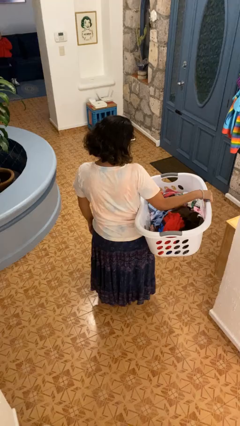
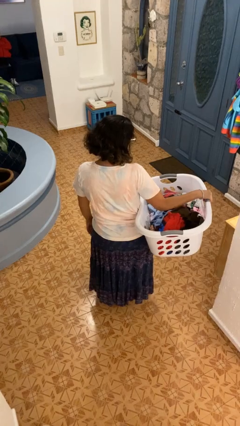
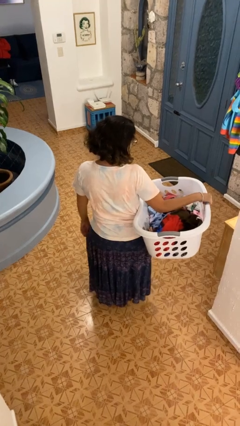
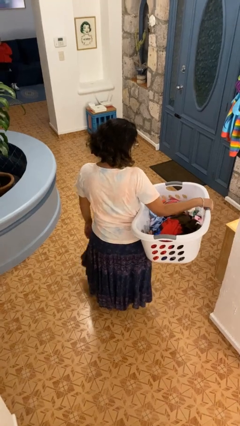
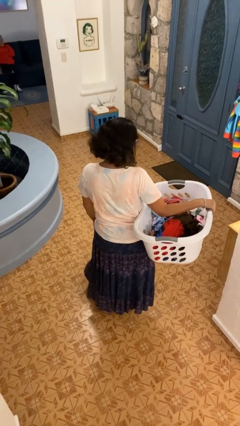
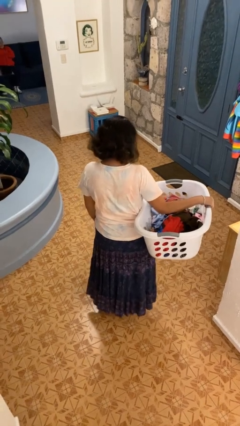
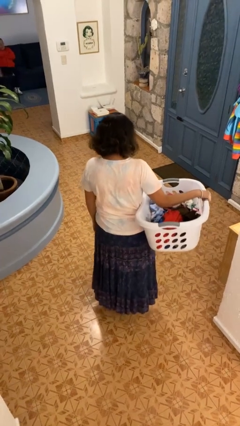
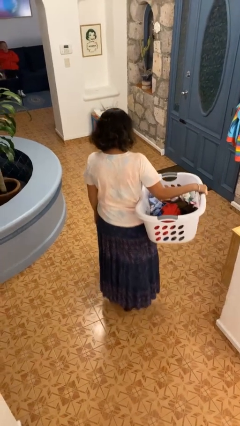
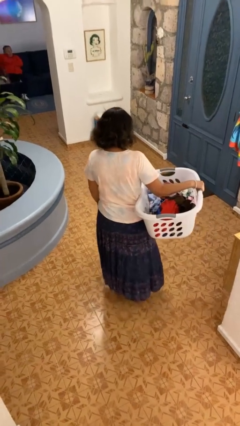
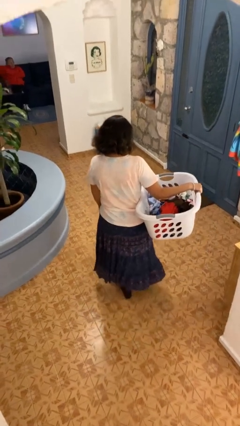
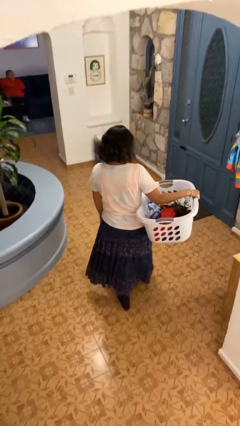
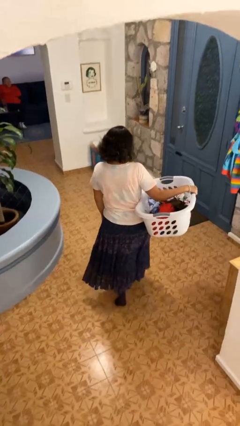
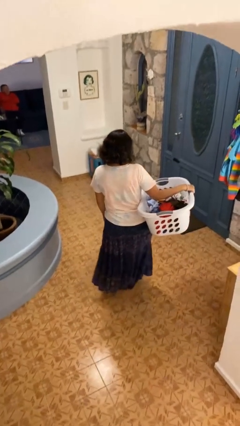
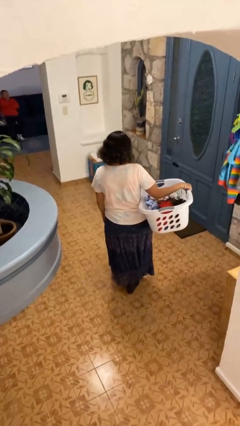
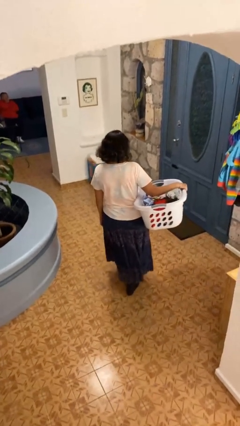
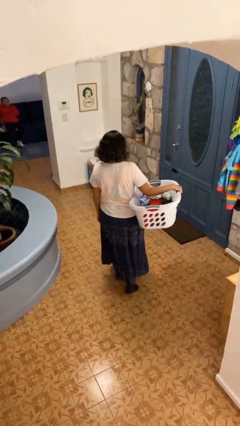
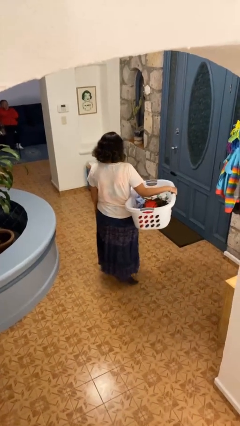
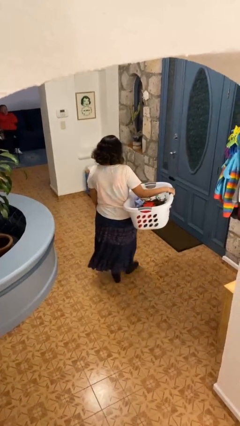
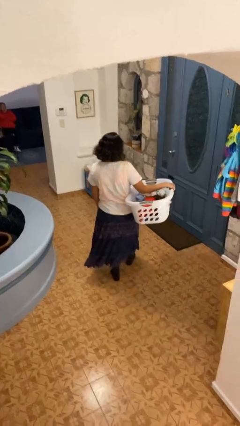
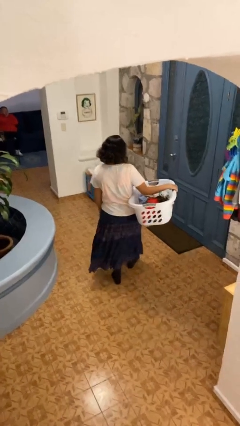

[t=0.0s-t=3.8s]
person carries laundry basket

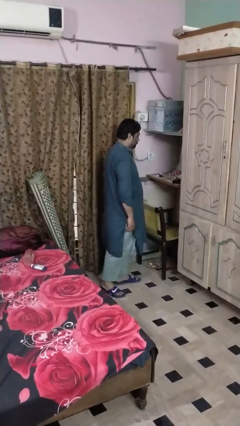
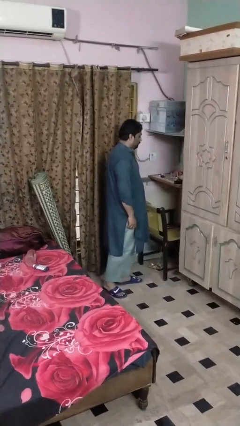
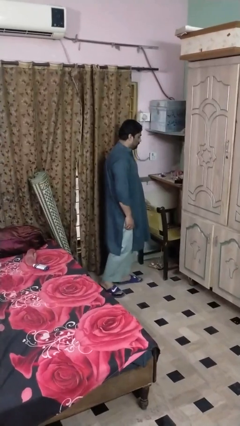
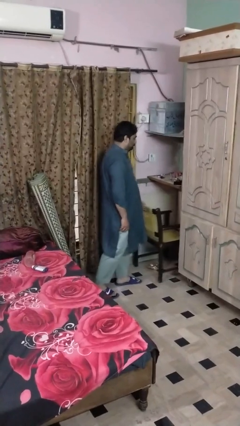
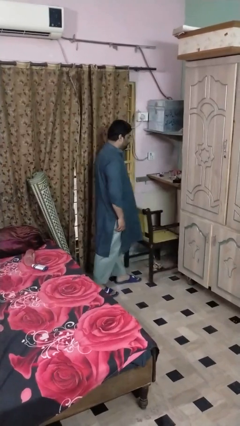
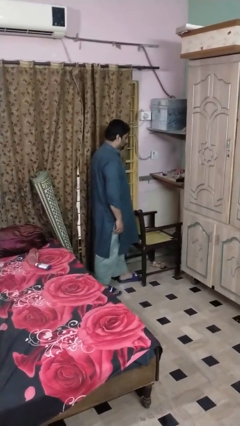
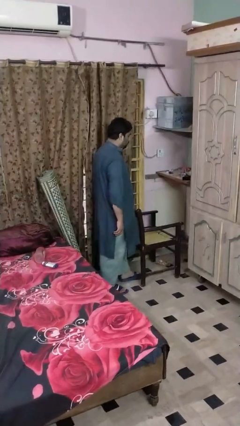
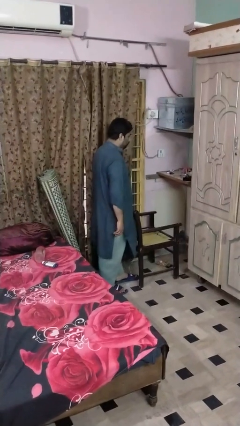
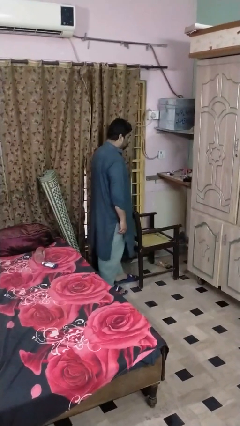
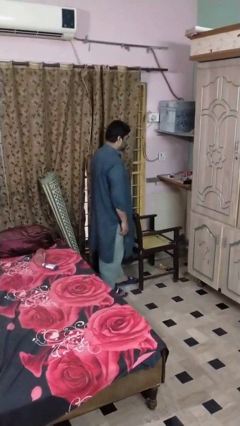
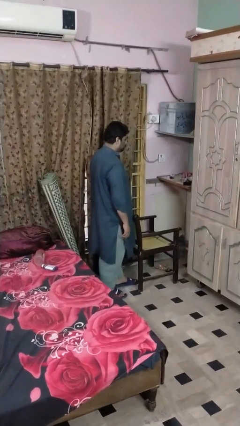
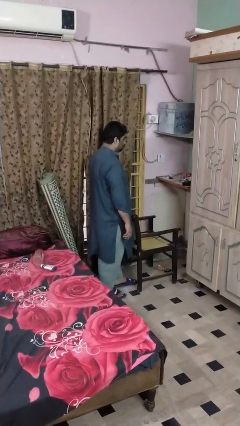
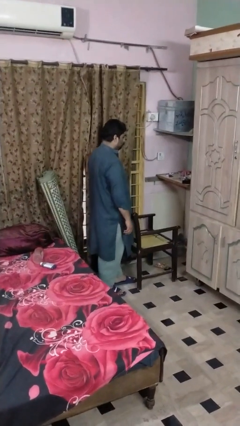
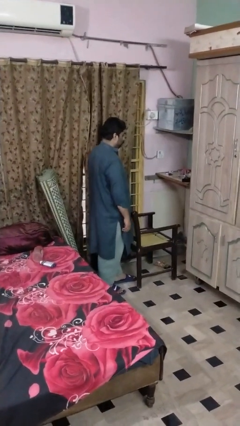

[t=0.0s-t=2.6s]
person pulls out chair

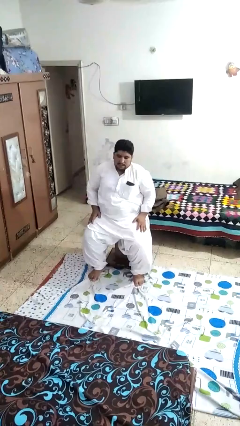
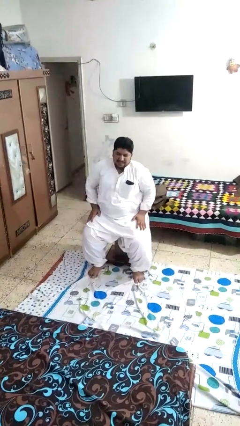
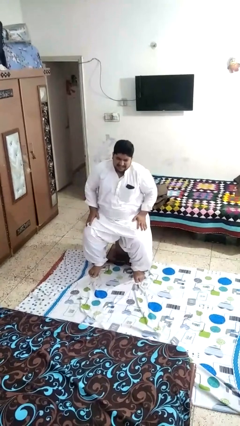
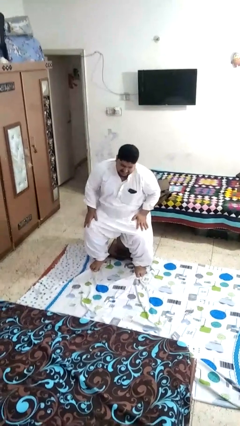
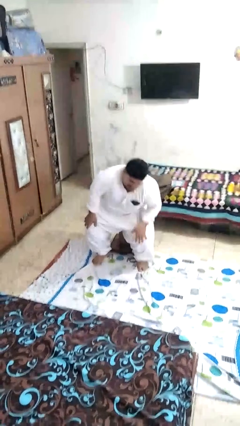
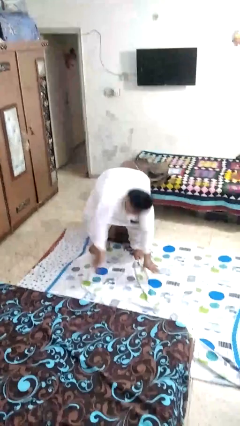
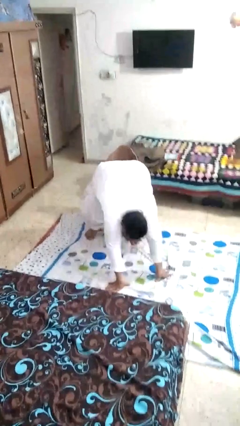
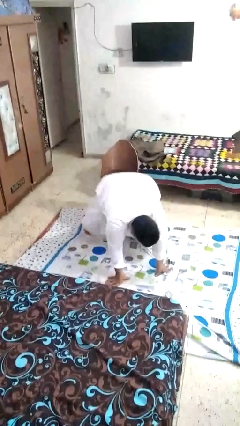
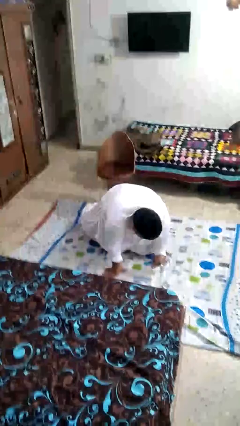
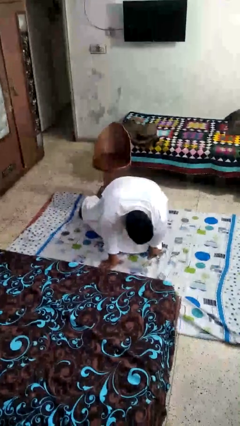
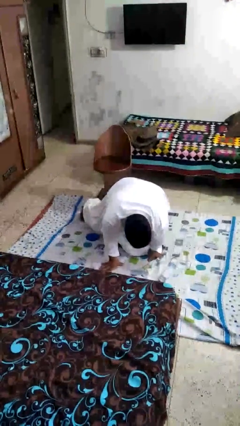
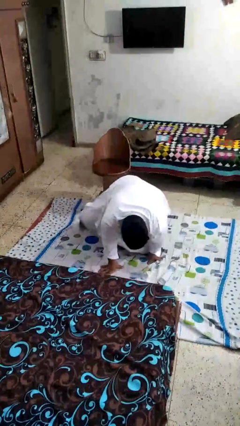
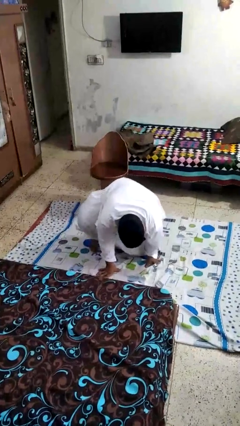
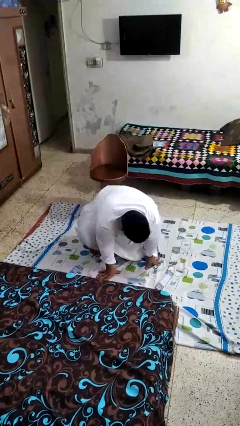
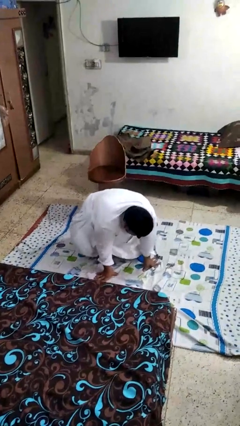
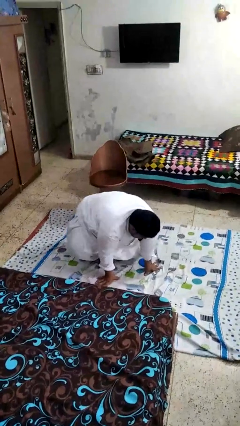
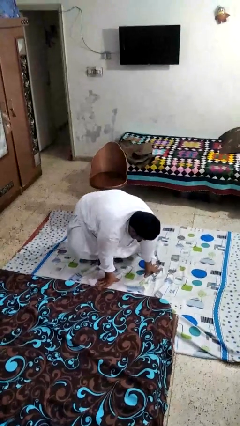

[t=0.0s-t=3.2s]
person falls from chair

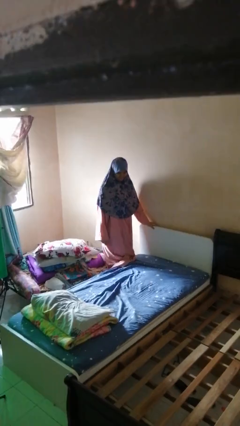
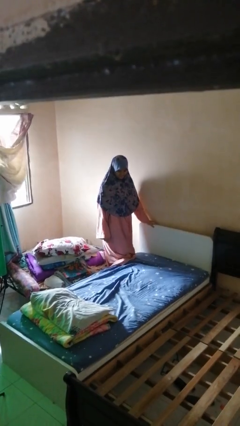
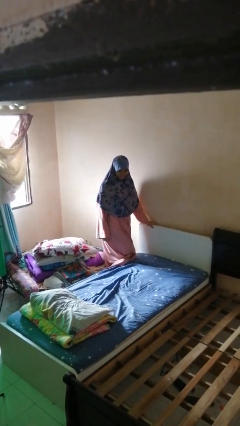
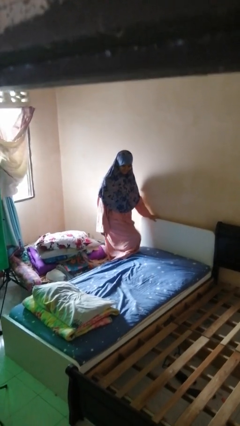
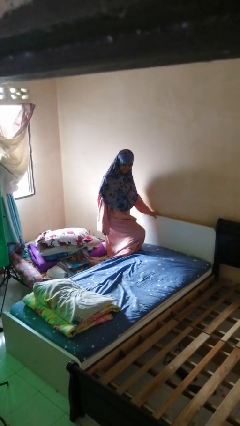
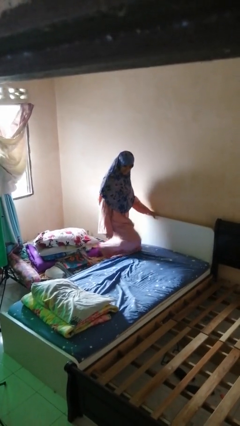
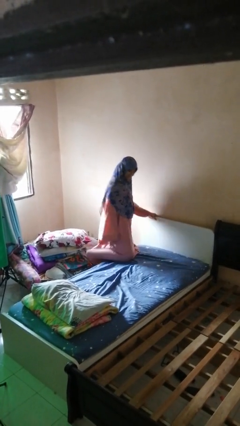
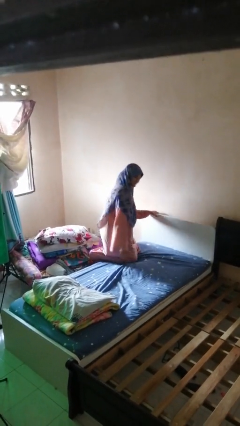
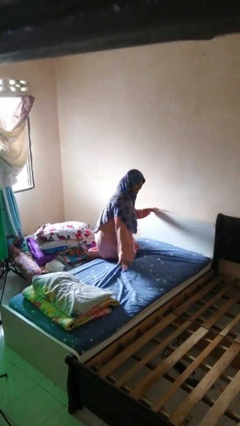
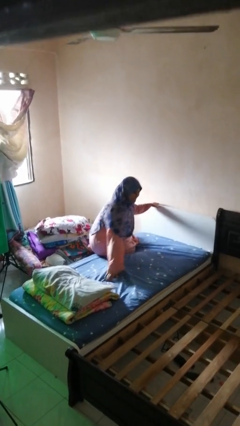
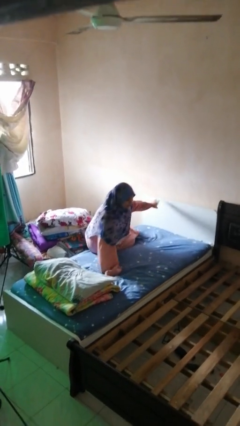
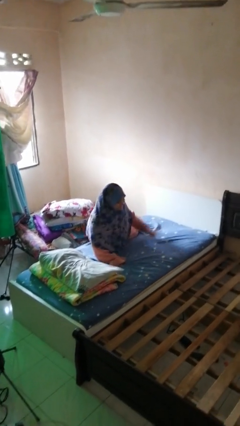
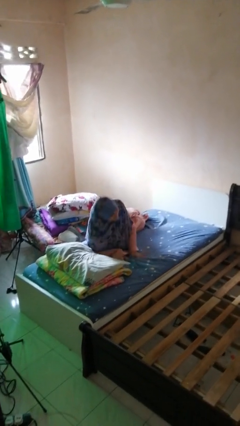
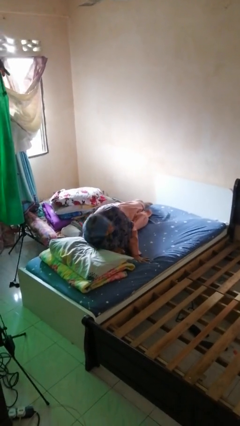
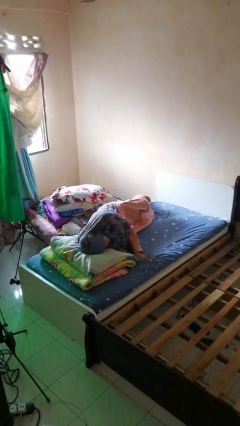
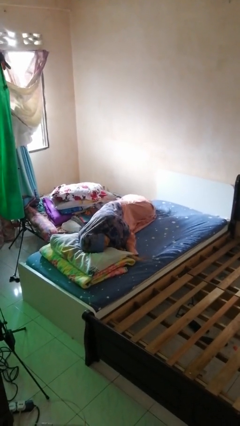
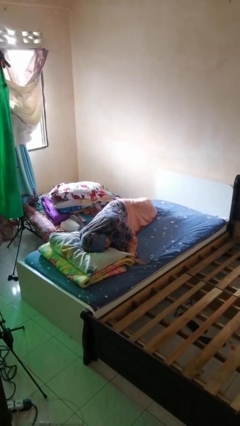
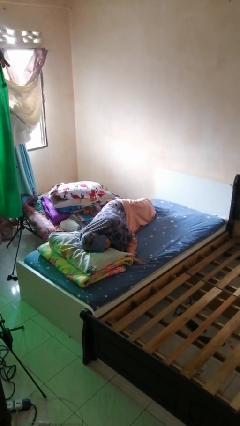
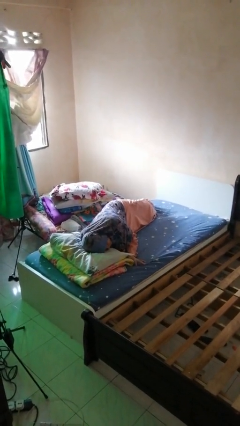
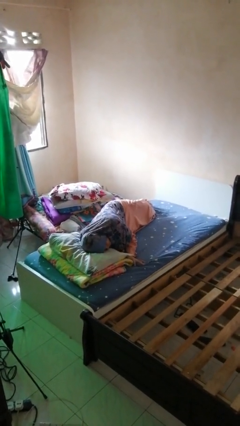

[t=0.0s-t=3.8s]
person lies down on bed

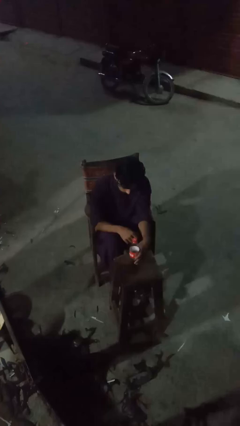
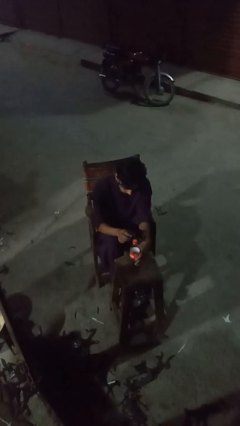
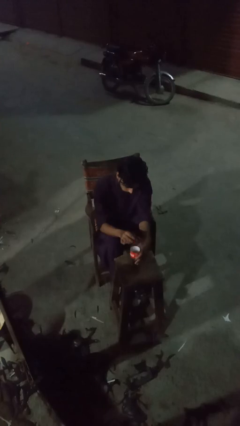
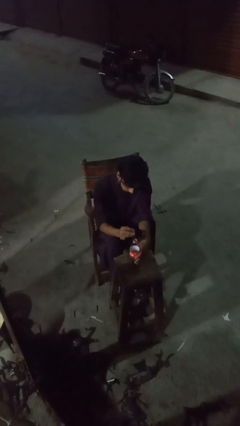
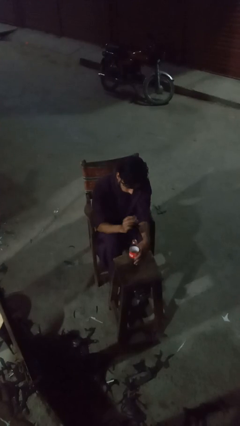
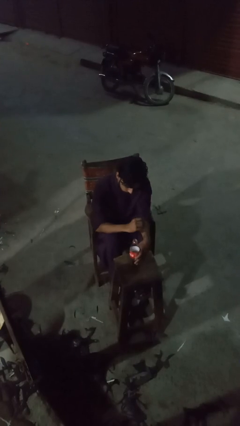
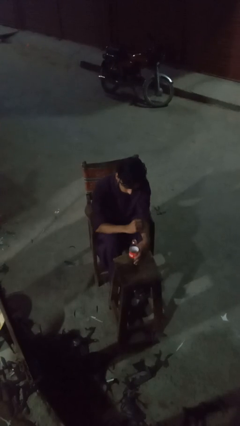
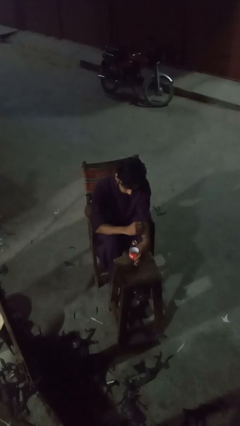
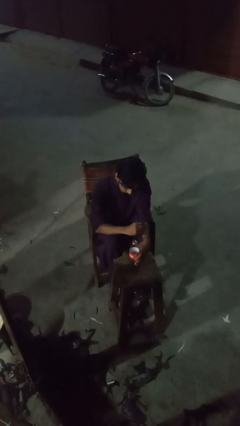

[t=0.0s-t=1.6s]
person unscrews lid from bottle

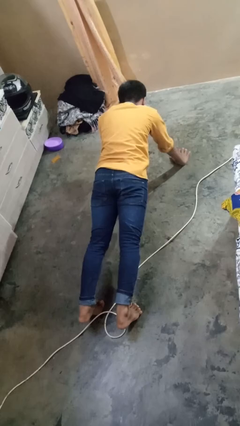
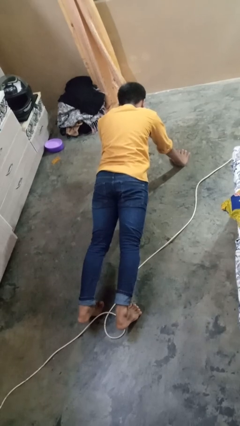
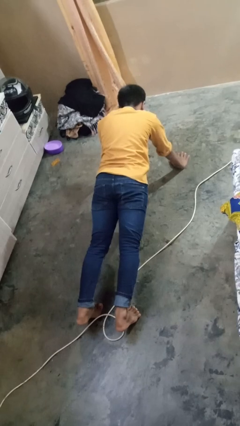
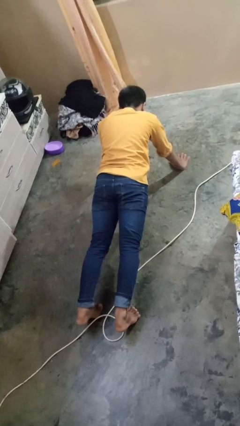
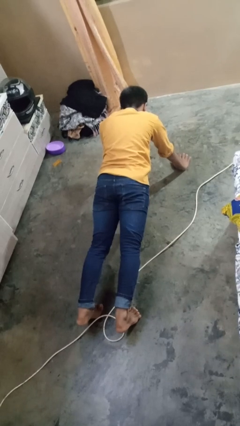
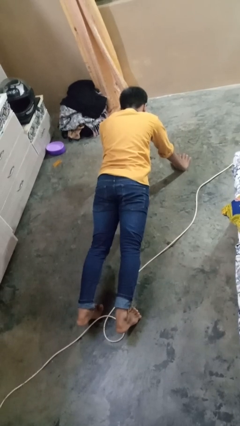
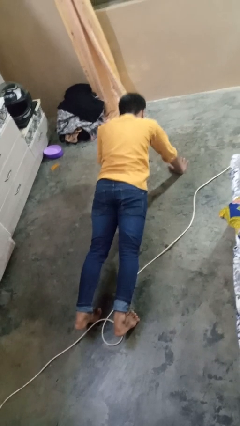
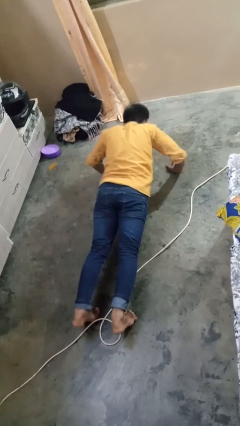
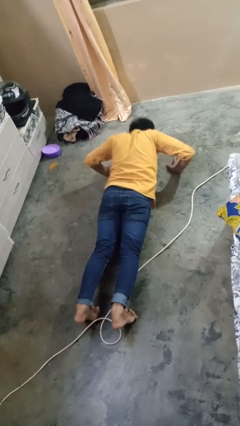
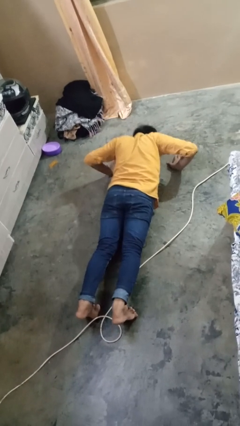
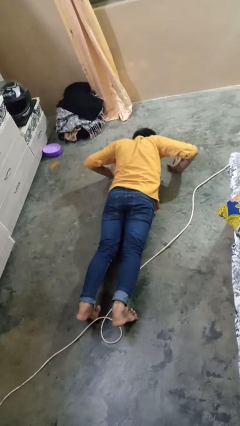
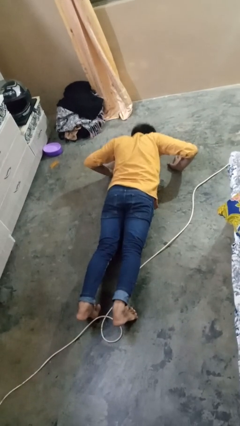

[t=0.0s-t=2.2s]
person exercises with pushup

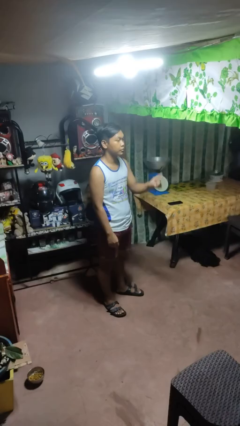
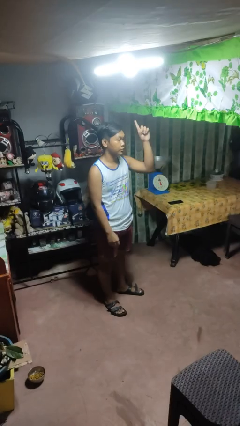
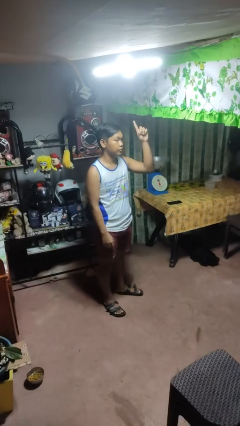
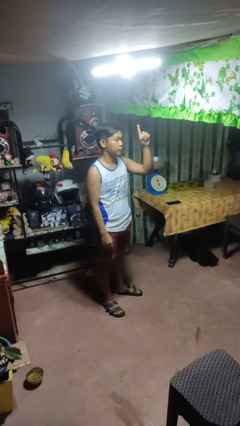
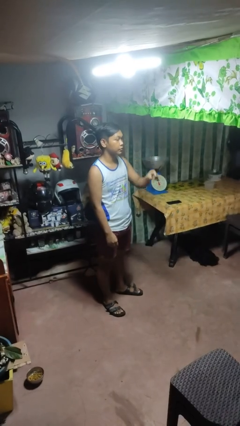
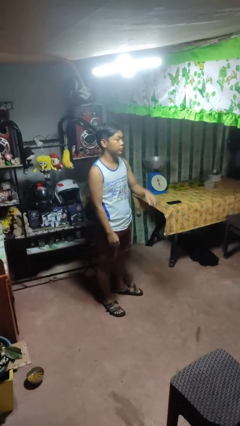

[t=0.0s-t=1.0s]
person gestures number one
